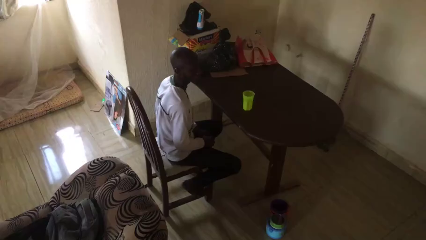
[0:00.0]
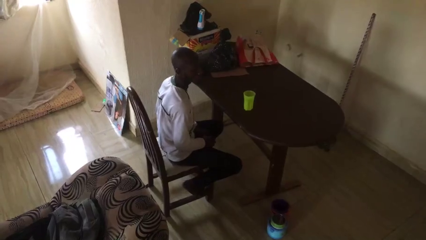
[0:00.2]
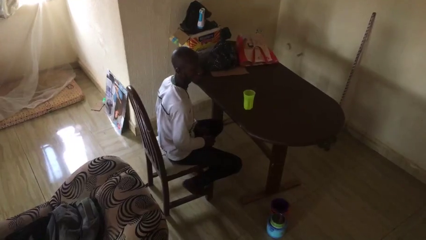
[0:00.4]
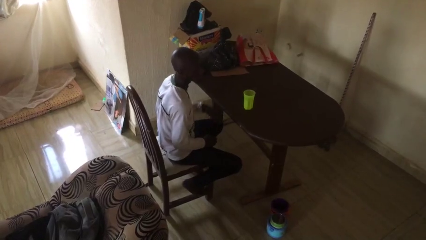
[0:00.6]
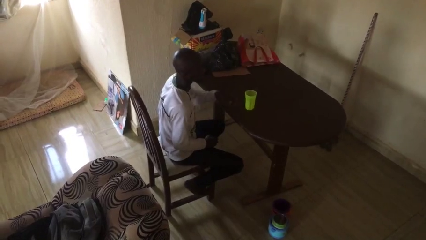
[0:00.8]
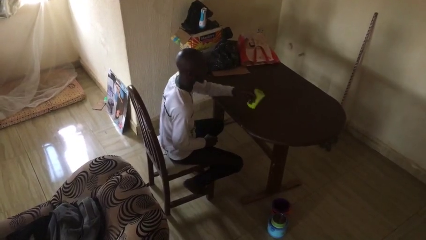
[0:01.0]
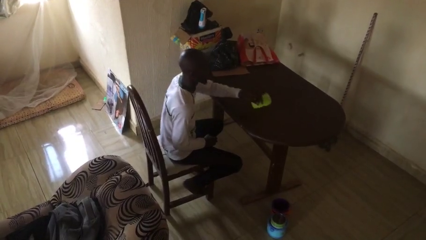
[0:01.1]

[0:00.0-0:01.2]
person knocks over glass

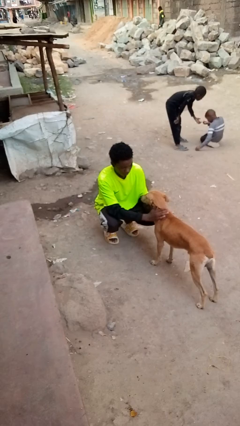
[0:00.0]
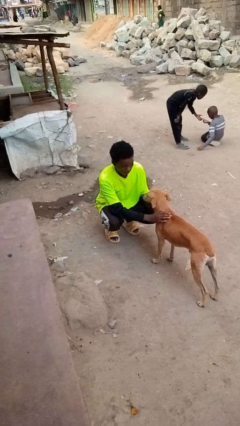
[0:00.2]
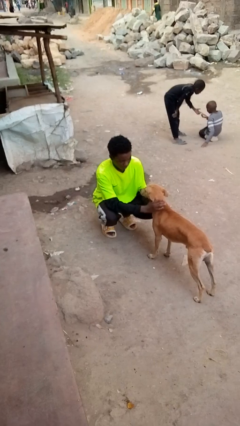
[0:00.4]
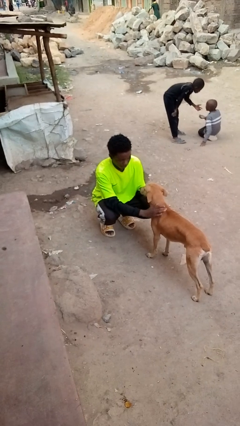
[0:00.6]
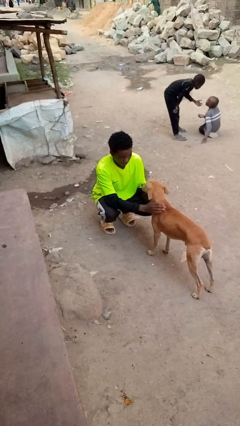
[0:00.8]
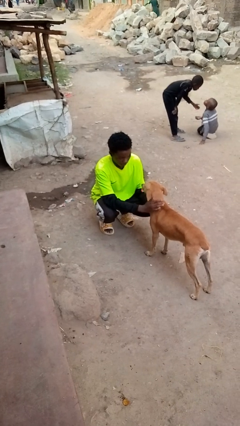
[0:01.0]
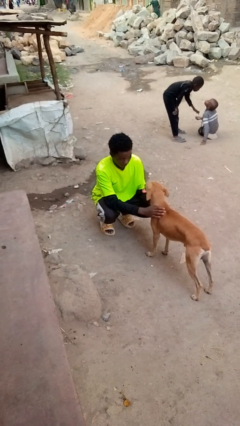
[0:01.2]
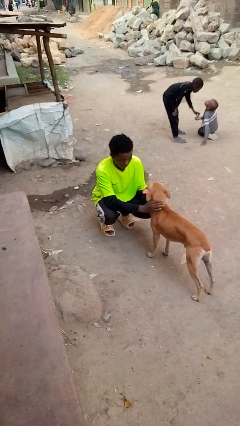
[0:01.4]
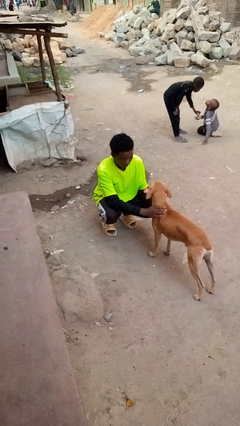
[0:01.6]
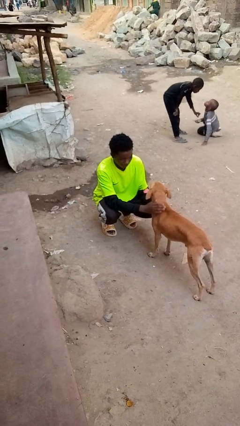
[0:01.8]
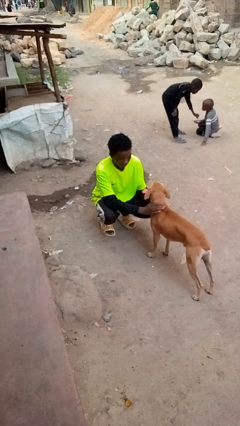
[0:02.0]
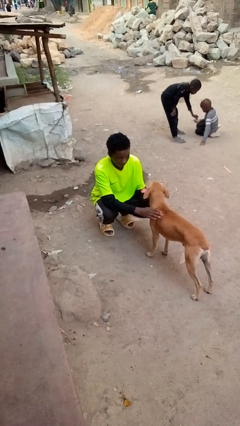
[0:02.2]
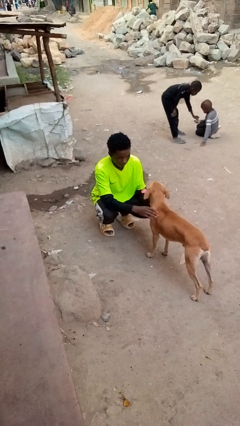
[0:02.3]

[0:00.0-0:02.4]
person pets dog

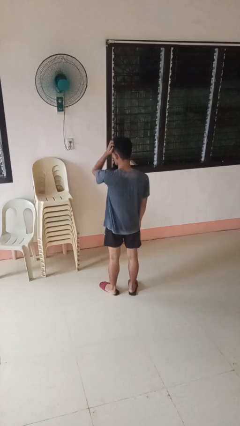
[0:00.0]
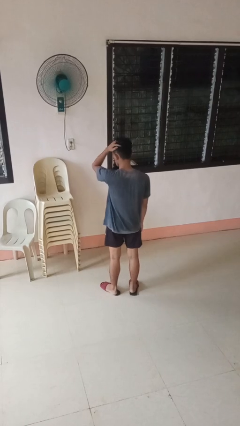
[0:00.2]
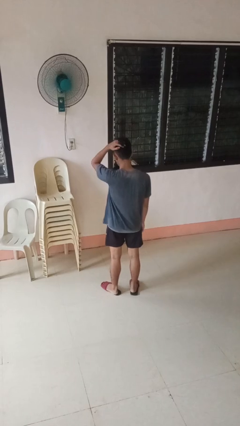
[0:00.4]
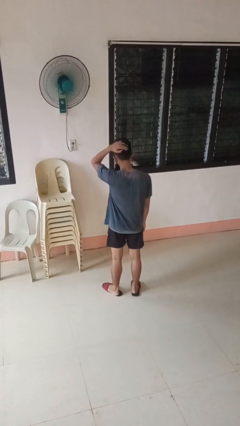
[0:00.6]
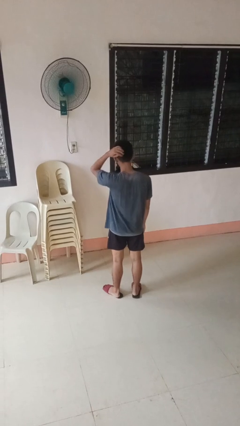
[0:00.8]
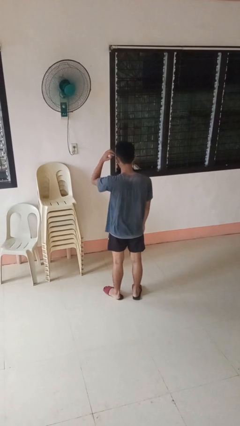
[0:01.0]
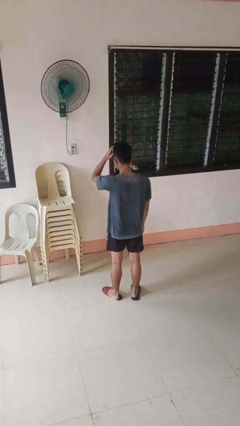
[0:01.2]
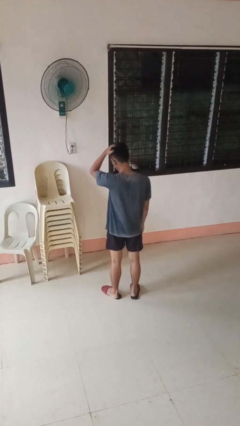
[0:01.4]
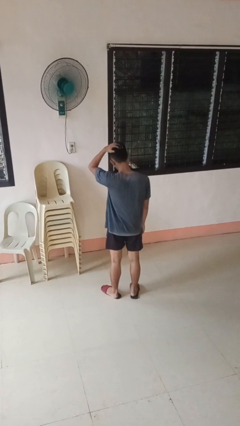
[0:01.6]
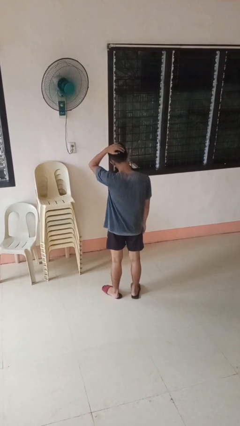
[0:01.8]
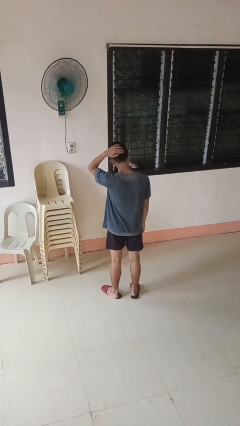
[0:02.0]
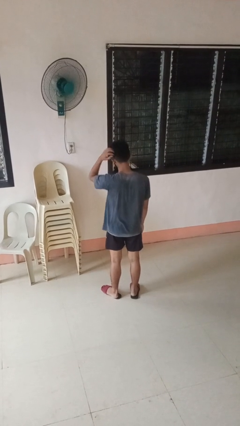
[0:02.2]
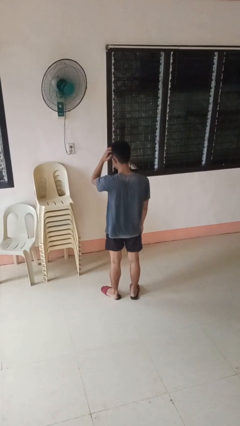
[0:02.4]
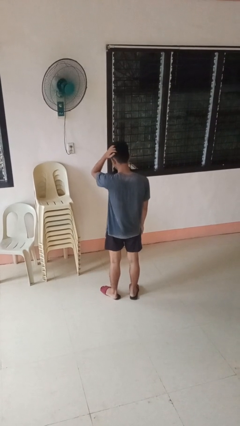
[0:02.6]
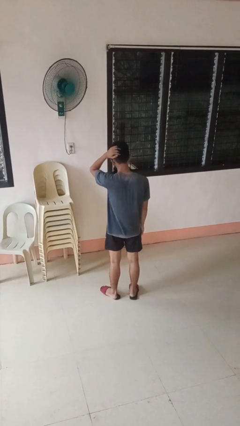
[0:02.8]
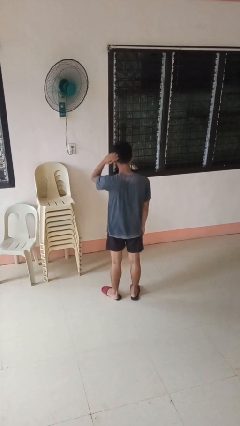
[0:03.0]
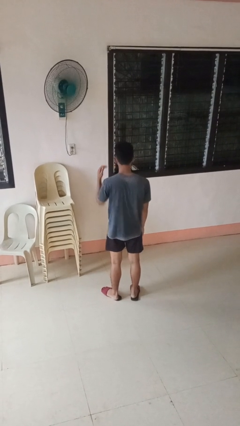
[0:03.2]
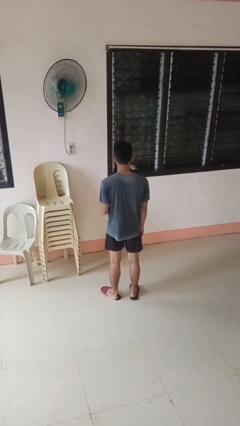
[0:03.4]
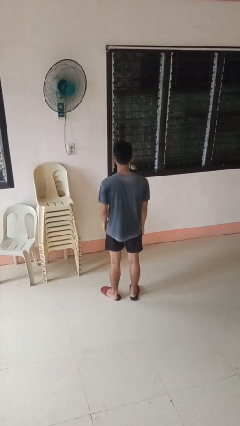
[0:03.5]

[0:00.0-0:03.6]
person strokes hair

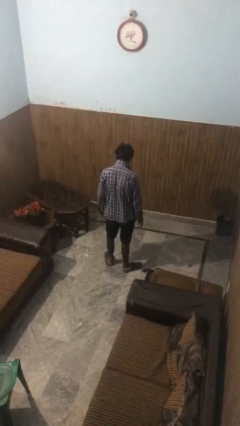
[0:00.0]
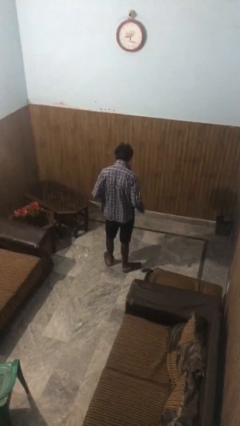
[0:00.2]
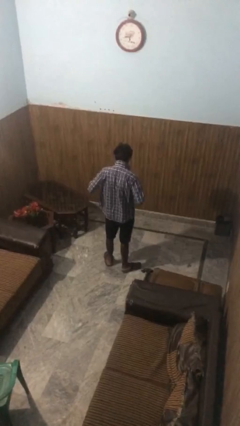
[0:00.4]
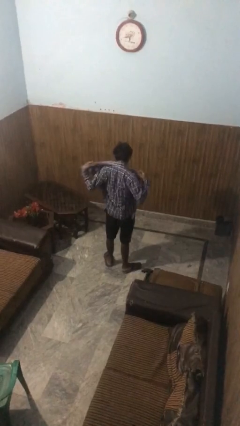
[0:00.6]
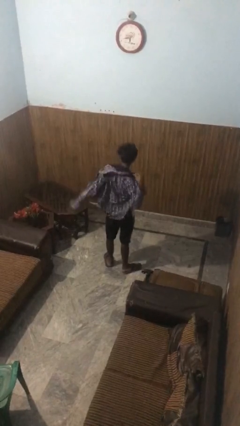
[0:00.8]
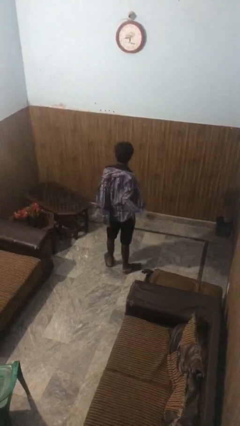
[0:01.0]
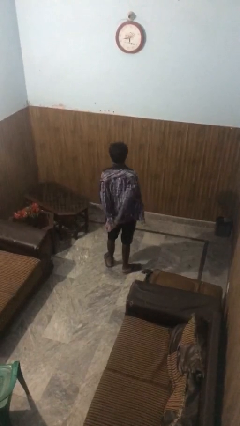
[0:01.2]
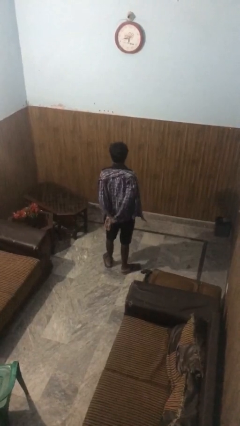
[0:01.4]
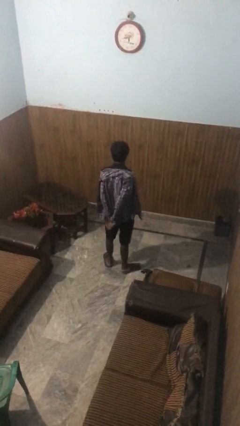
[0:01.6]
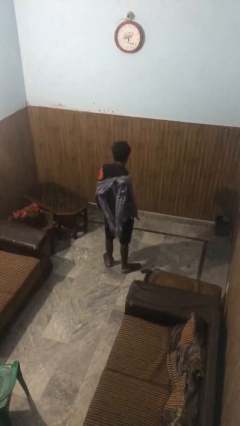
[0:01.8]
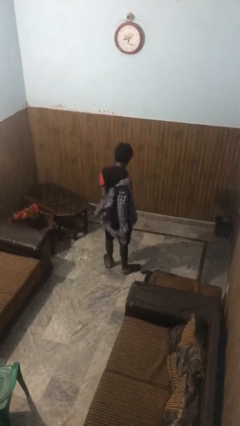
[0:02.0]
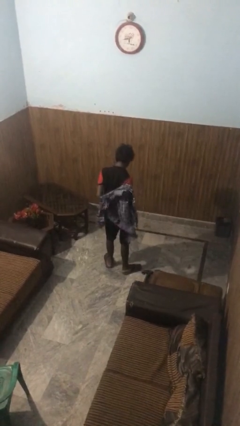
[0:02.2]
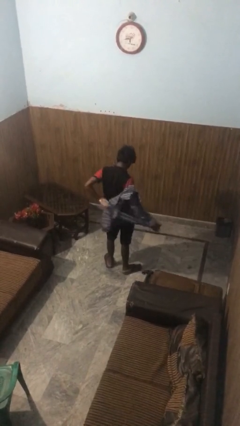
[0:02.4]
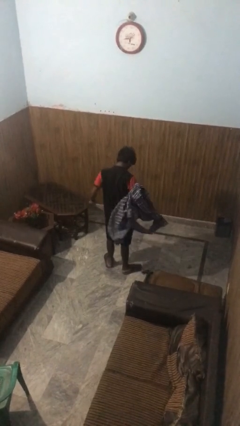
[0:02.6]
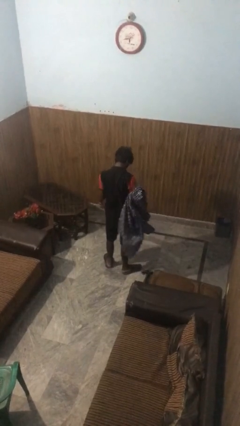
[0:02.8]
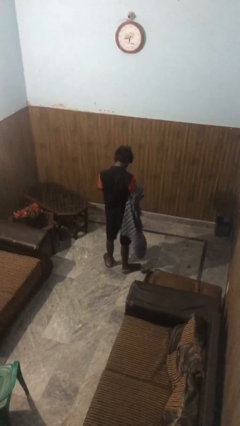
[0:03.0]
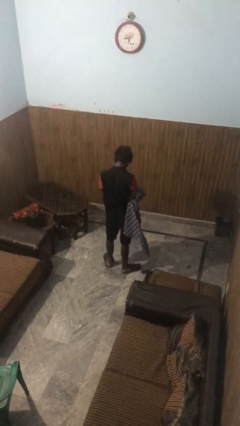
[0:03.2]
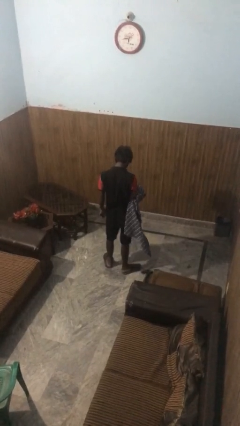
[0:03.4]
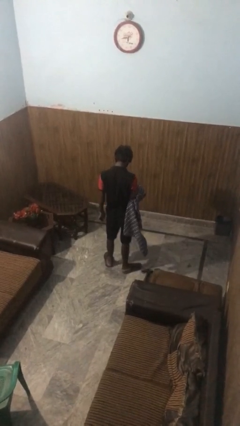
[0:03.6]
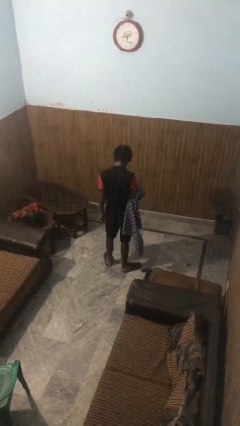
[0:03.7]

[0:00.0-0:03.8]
person takes off shirt

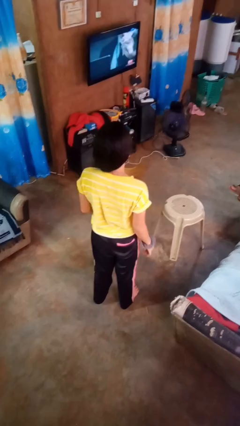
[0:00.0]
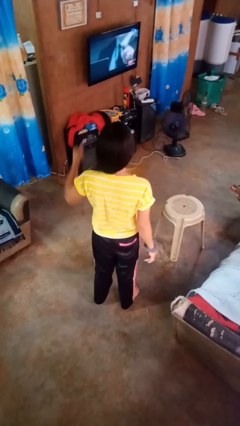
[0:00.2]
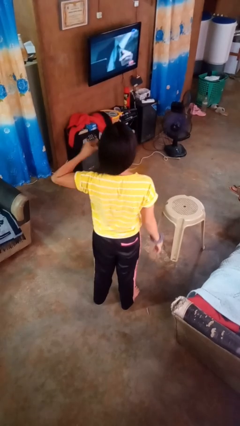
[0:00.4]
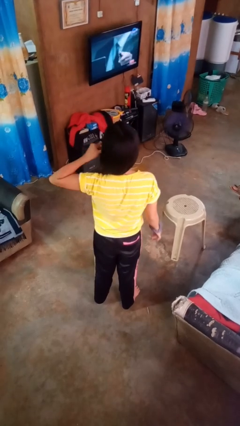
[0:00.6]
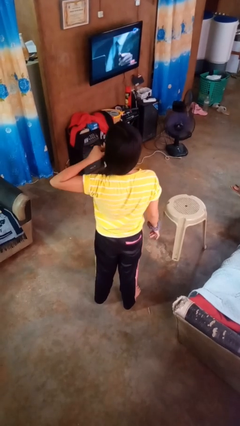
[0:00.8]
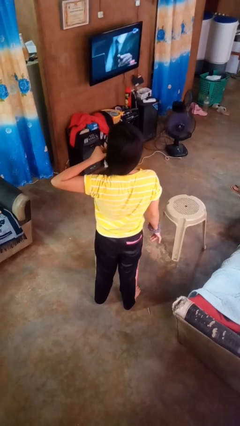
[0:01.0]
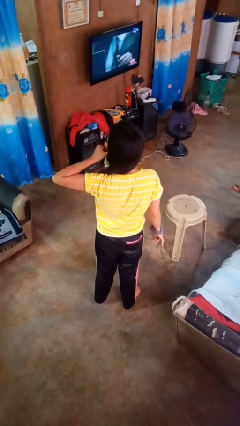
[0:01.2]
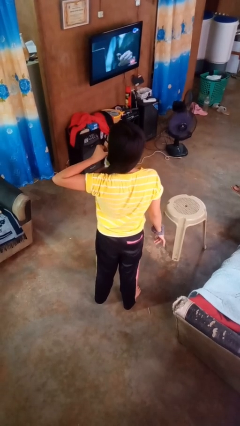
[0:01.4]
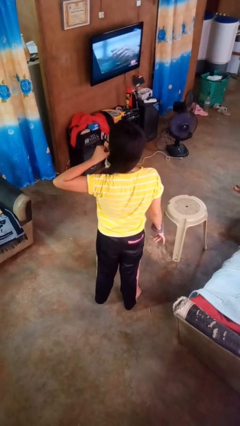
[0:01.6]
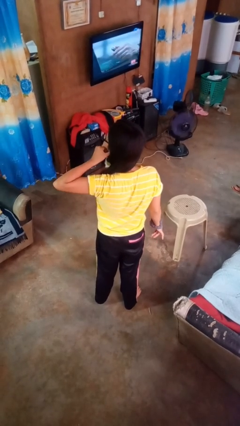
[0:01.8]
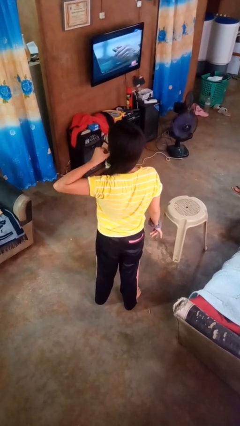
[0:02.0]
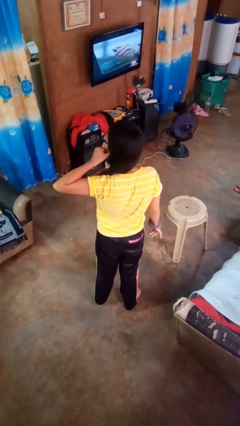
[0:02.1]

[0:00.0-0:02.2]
person gestures call me

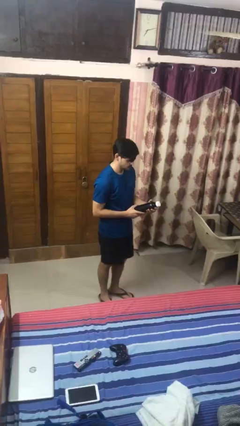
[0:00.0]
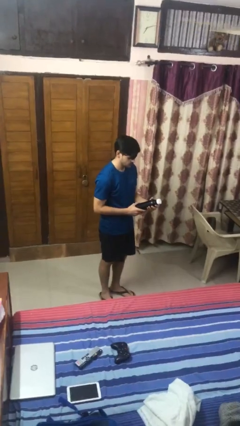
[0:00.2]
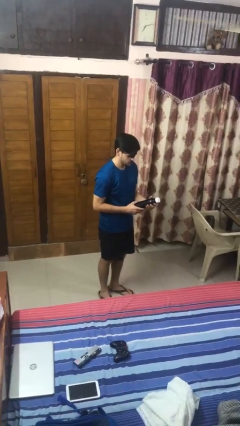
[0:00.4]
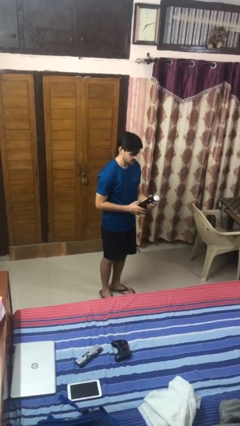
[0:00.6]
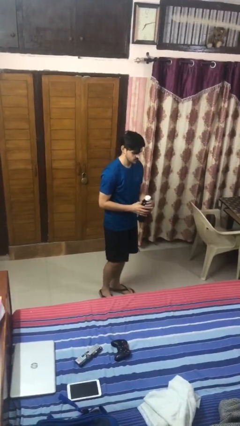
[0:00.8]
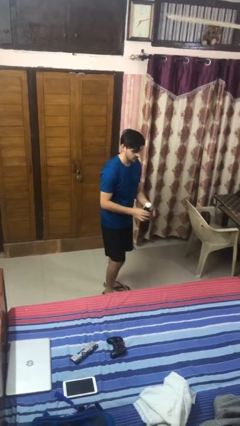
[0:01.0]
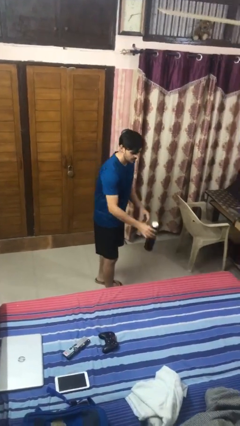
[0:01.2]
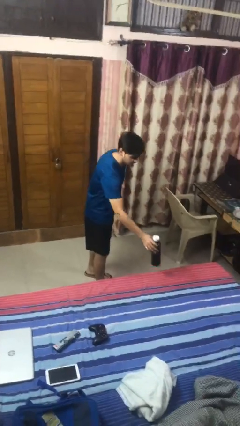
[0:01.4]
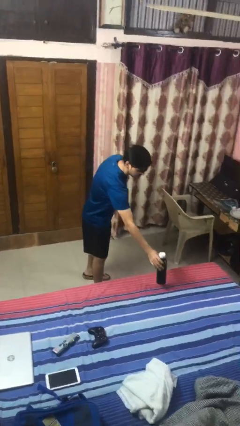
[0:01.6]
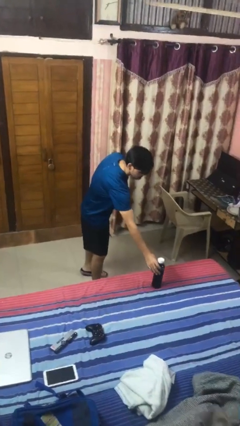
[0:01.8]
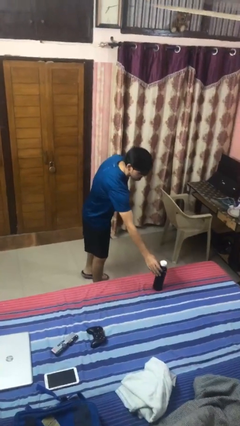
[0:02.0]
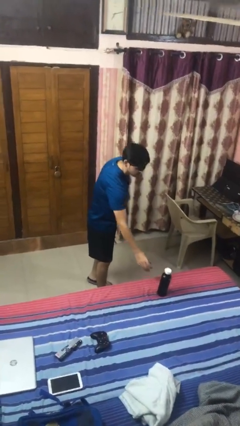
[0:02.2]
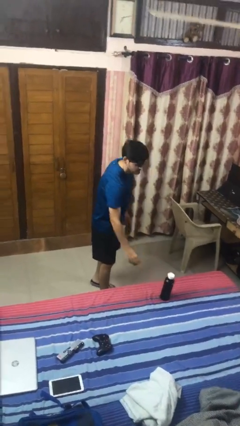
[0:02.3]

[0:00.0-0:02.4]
person puts down object on bed

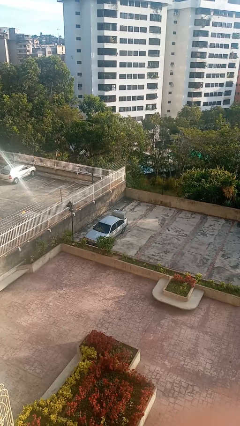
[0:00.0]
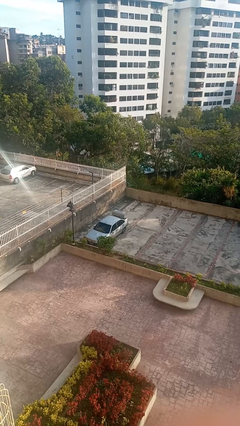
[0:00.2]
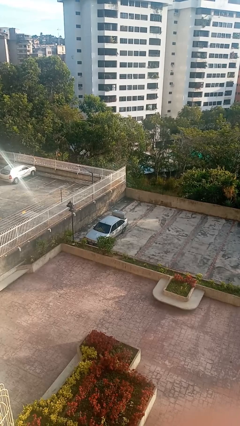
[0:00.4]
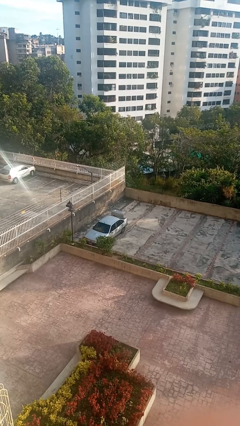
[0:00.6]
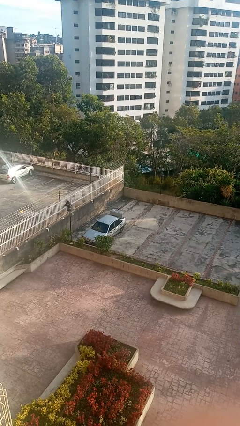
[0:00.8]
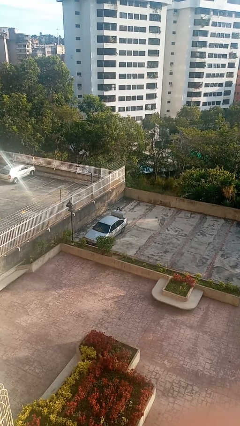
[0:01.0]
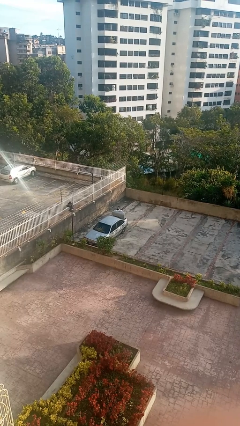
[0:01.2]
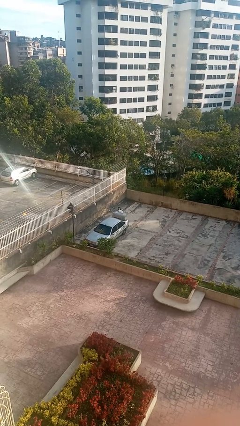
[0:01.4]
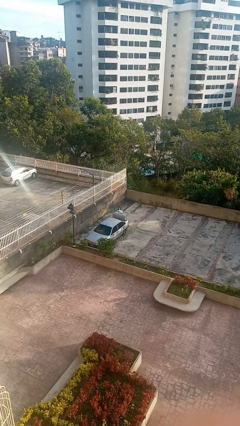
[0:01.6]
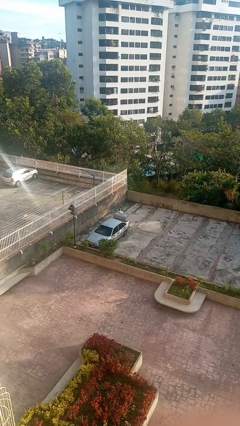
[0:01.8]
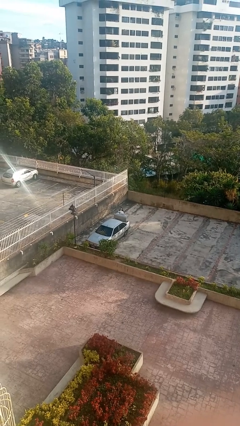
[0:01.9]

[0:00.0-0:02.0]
person unloads car
